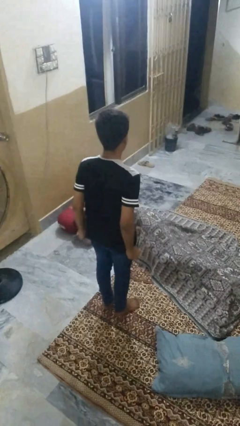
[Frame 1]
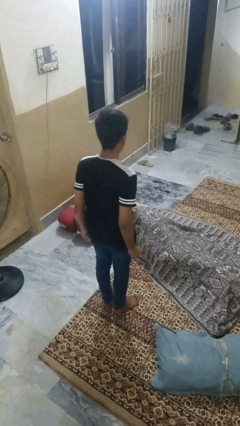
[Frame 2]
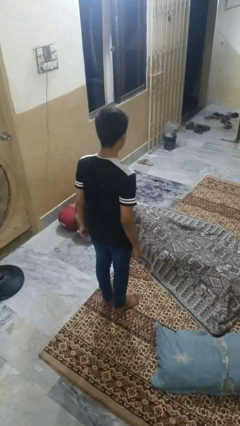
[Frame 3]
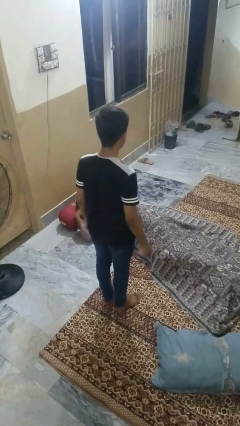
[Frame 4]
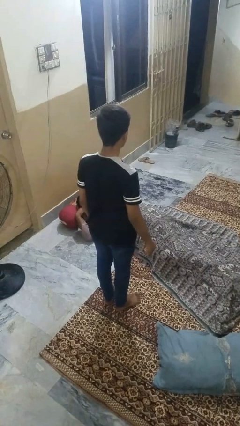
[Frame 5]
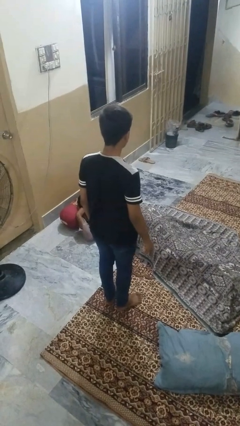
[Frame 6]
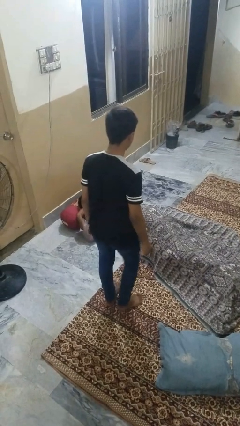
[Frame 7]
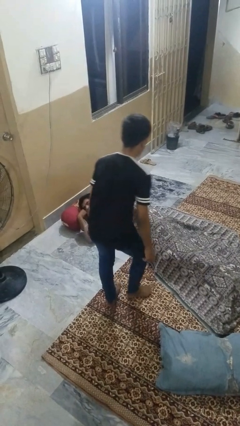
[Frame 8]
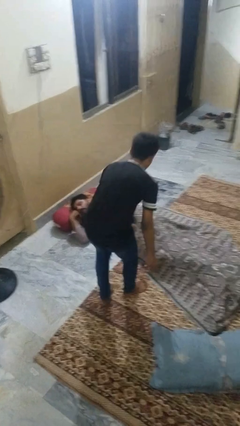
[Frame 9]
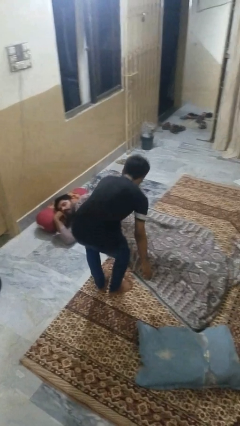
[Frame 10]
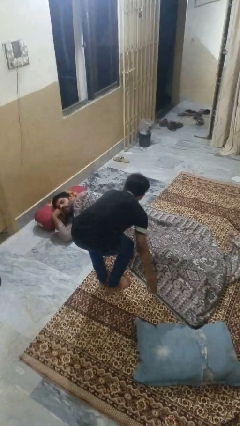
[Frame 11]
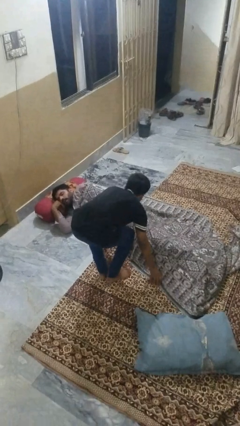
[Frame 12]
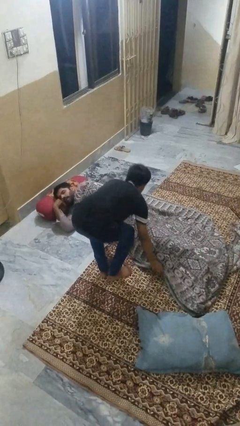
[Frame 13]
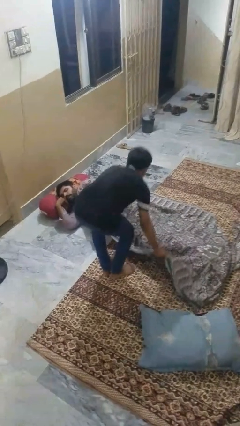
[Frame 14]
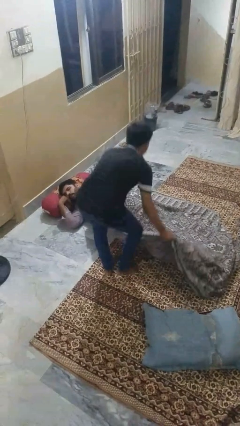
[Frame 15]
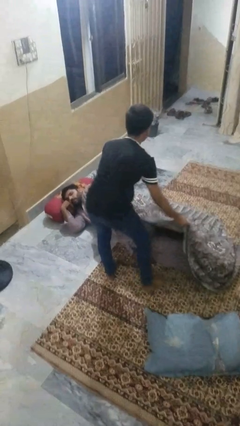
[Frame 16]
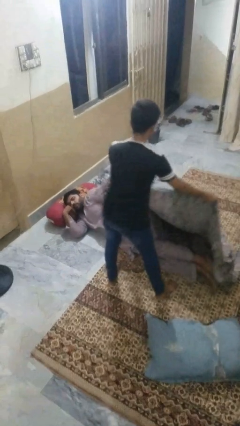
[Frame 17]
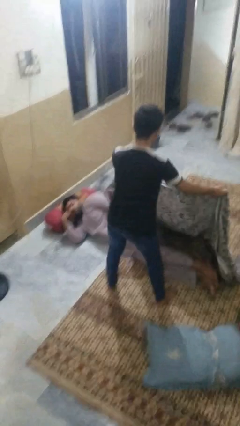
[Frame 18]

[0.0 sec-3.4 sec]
person uncovers friend with blanket

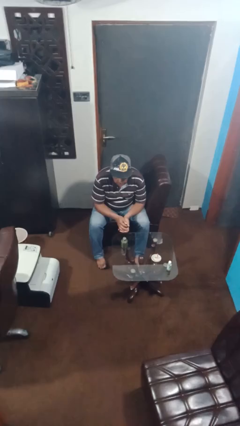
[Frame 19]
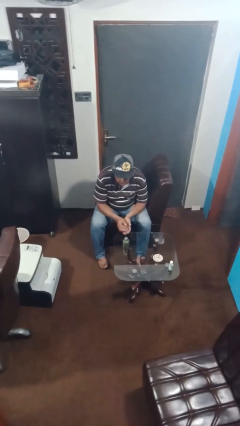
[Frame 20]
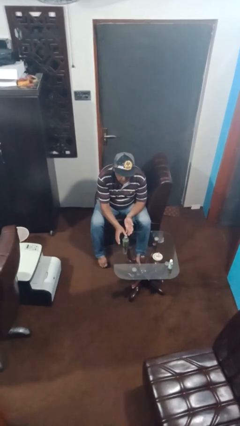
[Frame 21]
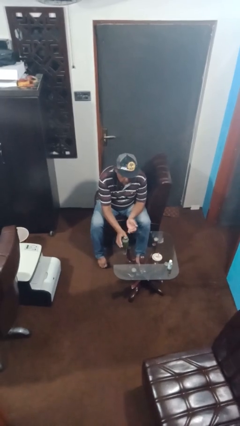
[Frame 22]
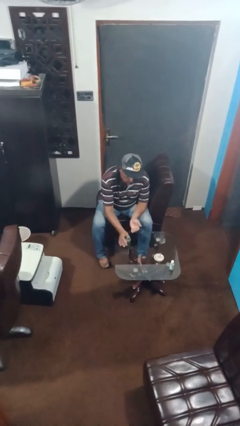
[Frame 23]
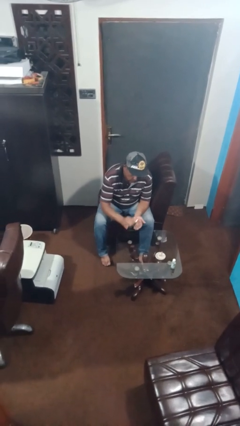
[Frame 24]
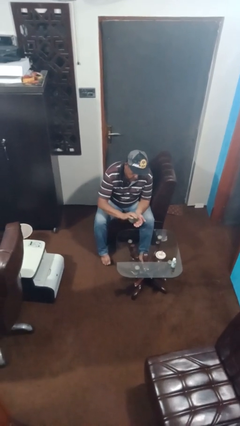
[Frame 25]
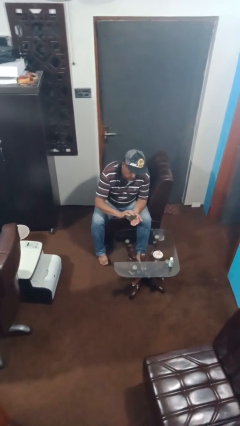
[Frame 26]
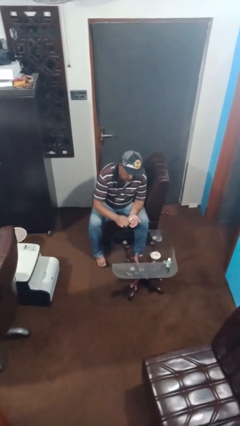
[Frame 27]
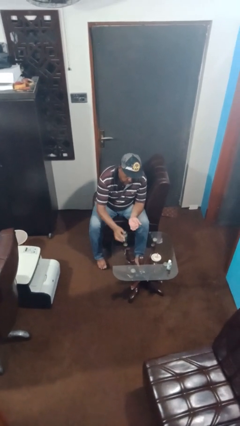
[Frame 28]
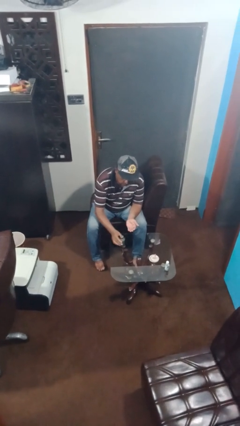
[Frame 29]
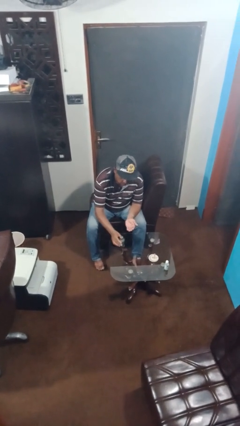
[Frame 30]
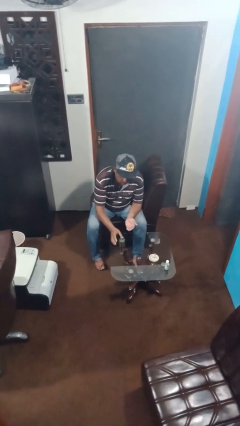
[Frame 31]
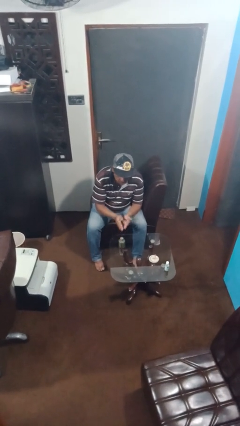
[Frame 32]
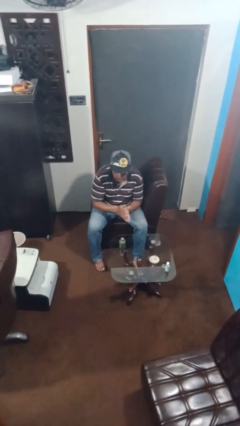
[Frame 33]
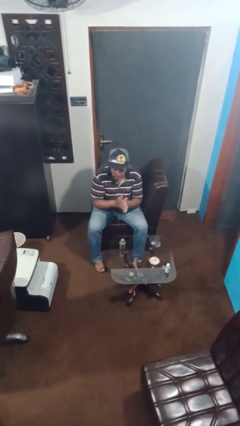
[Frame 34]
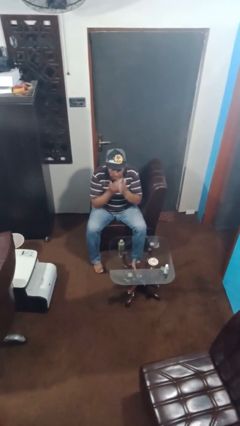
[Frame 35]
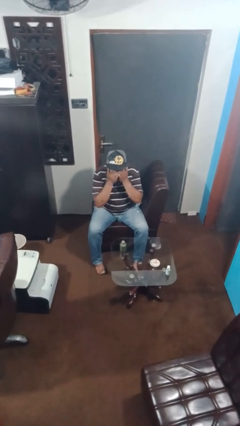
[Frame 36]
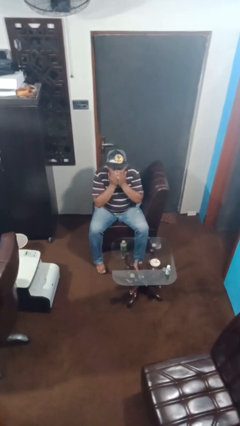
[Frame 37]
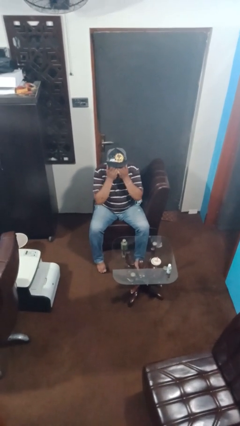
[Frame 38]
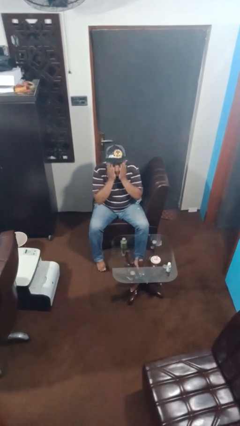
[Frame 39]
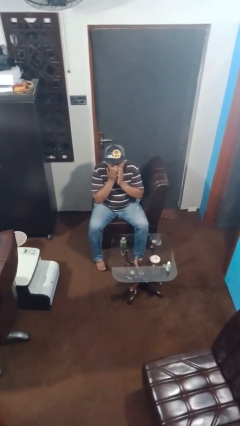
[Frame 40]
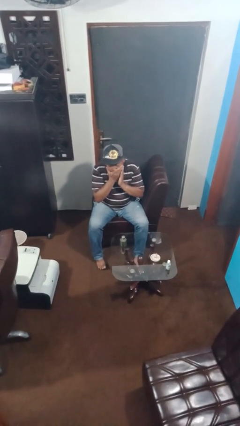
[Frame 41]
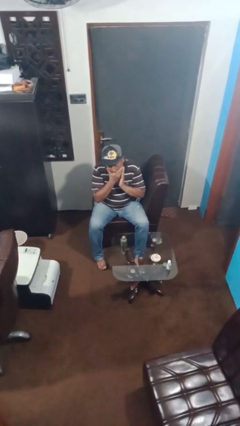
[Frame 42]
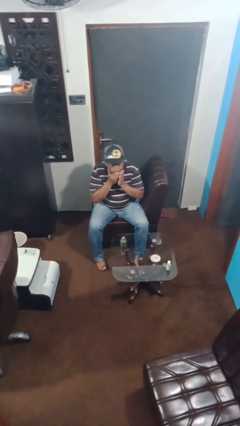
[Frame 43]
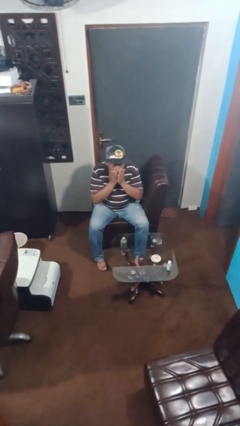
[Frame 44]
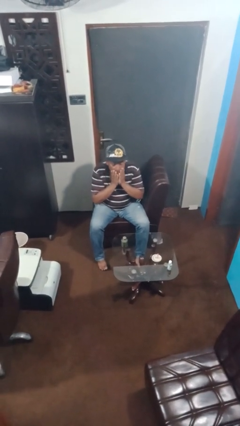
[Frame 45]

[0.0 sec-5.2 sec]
person applies facial moisturizer

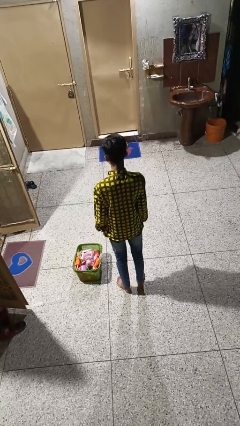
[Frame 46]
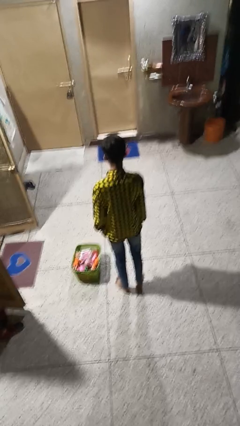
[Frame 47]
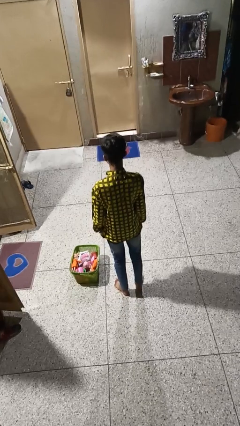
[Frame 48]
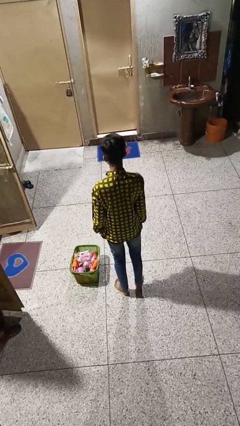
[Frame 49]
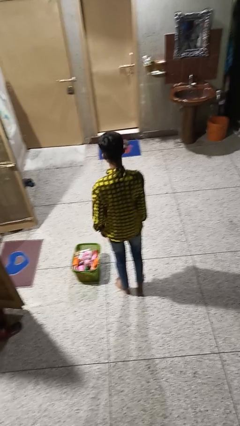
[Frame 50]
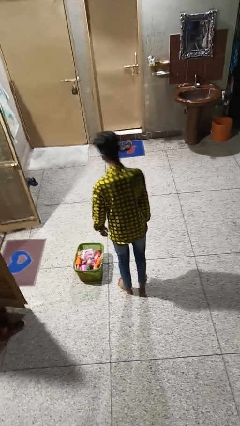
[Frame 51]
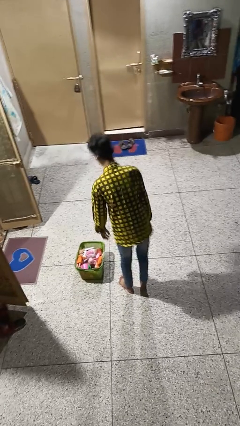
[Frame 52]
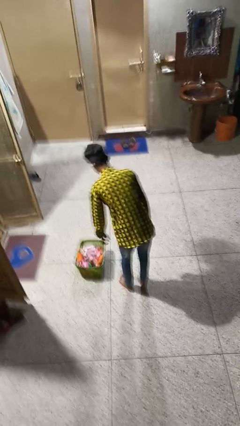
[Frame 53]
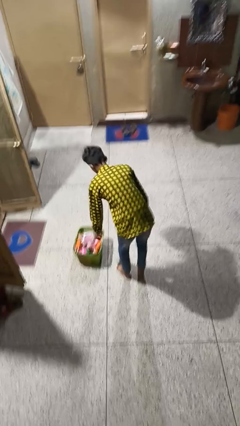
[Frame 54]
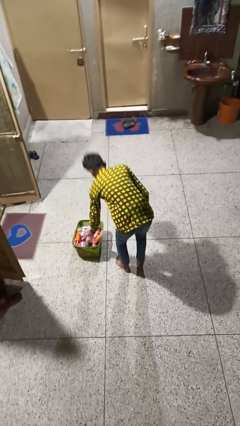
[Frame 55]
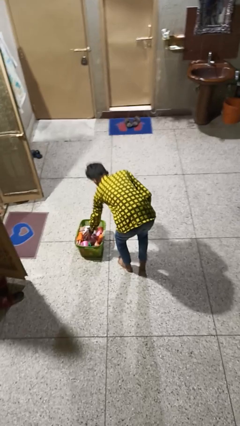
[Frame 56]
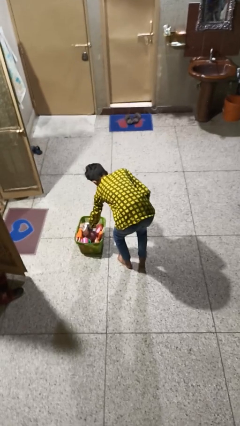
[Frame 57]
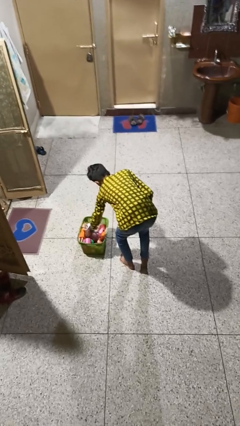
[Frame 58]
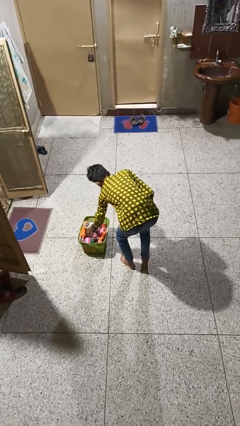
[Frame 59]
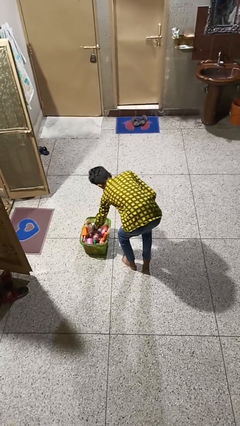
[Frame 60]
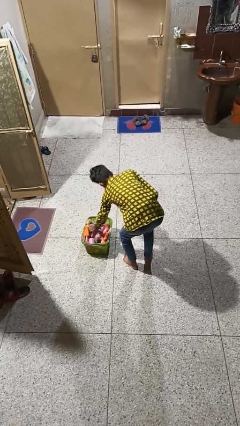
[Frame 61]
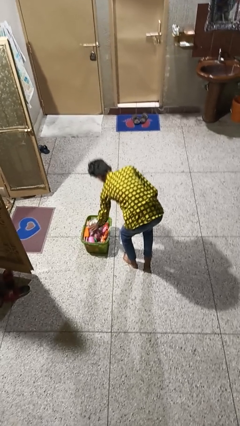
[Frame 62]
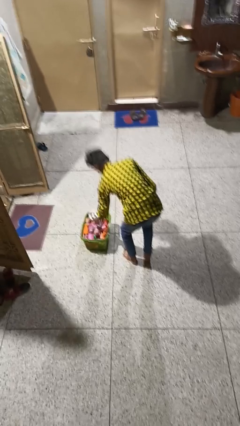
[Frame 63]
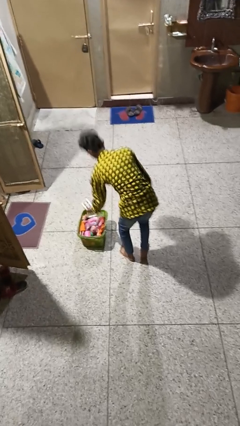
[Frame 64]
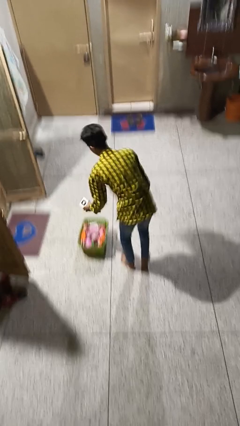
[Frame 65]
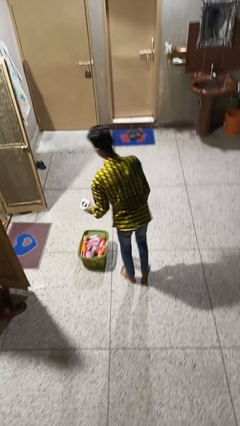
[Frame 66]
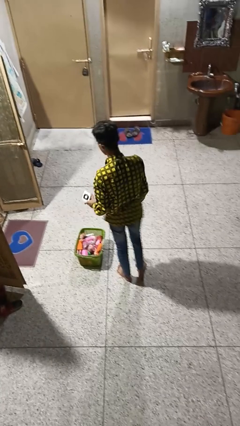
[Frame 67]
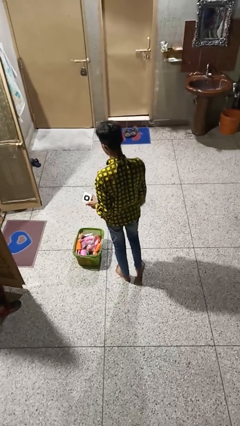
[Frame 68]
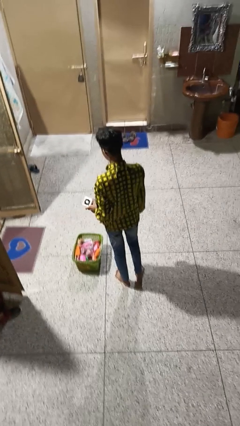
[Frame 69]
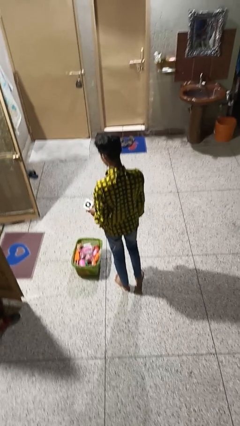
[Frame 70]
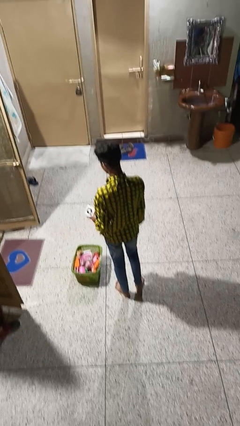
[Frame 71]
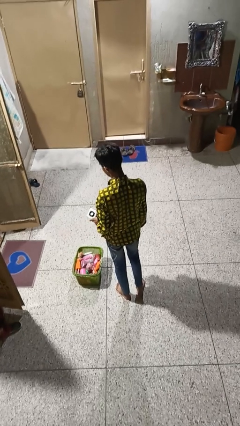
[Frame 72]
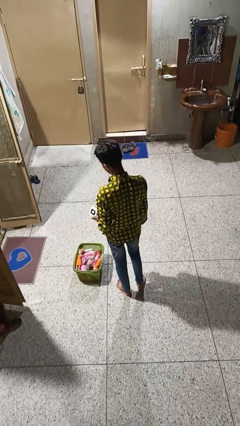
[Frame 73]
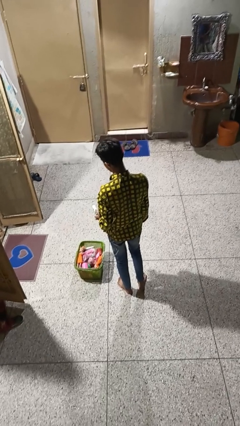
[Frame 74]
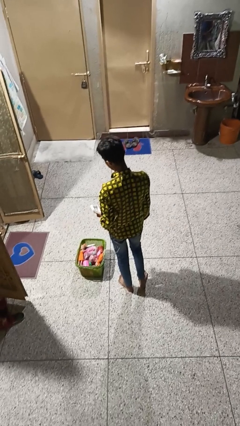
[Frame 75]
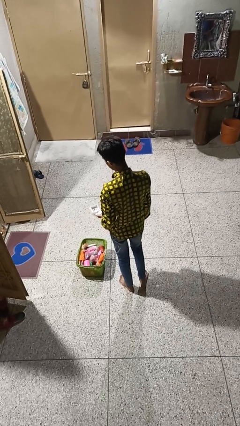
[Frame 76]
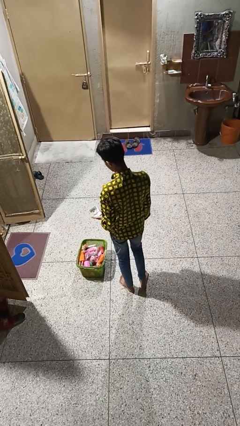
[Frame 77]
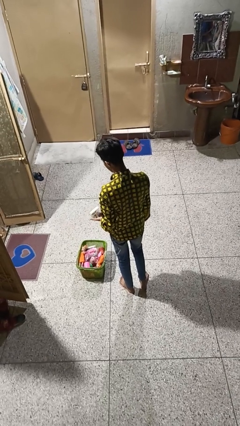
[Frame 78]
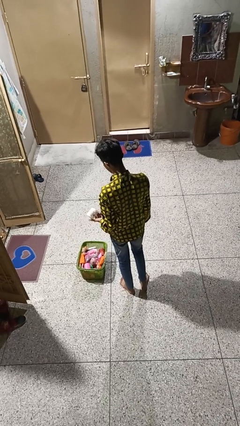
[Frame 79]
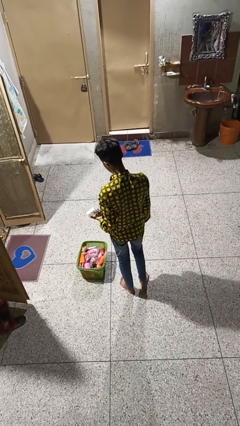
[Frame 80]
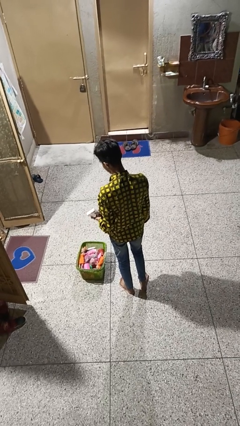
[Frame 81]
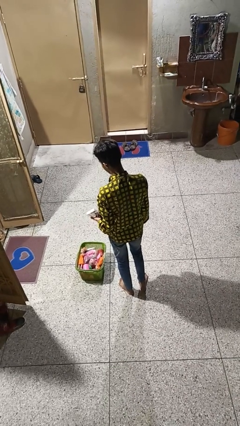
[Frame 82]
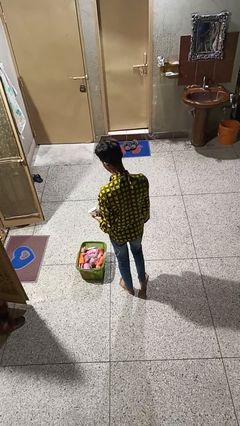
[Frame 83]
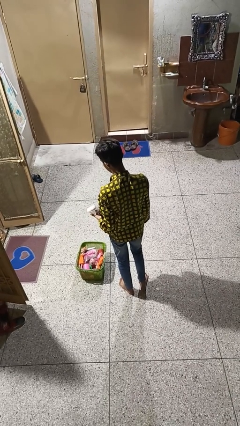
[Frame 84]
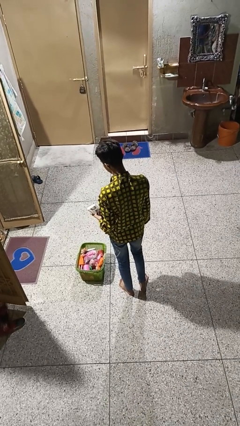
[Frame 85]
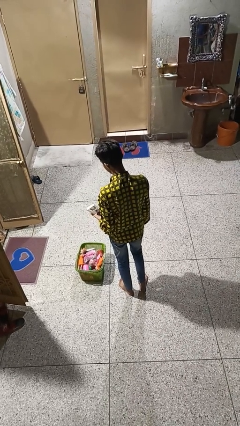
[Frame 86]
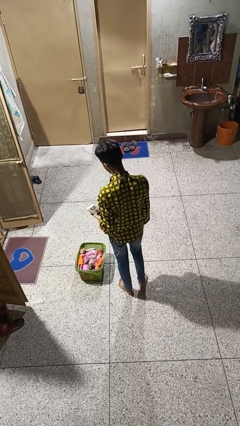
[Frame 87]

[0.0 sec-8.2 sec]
person puts object into basket

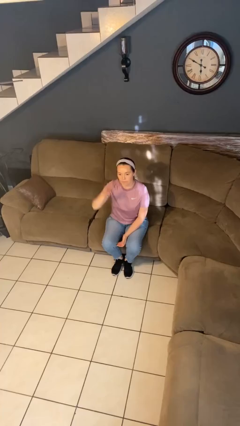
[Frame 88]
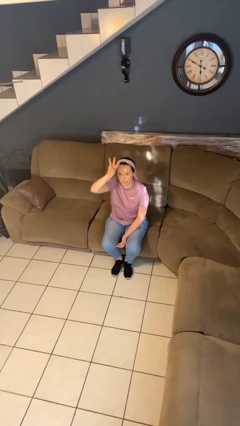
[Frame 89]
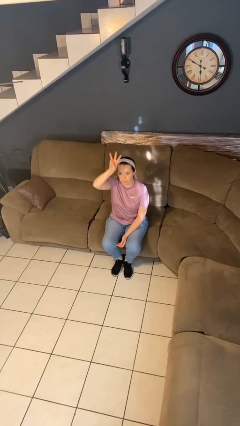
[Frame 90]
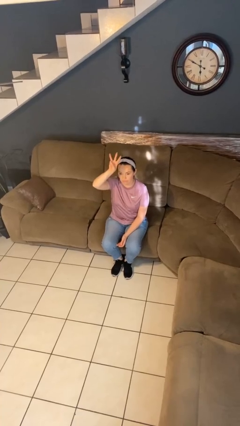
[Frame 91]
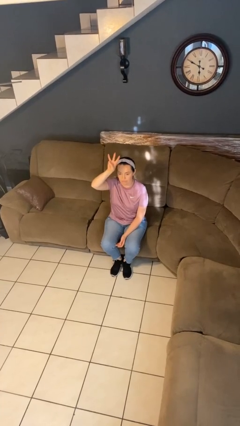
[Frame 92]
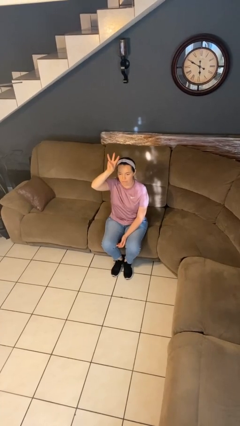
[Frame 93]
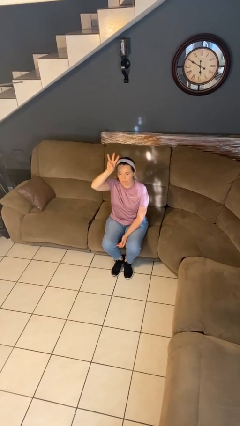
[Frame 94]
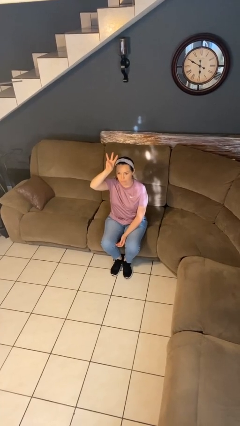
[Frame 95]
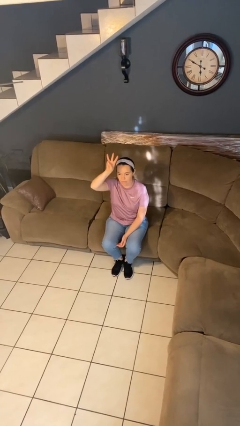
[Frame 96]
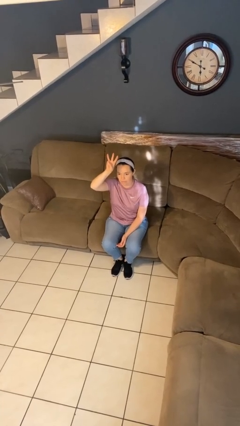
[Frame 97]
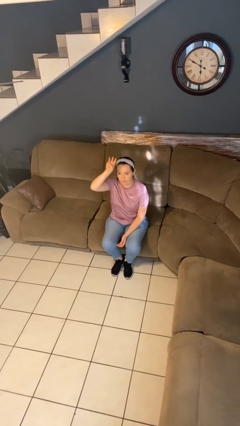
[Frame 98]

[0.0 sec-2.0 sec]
person gestures number three
